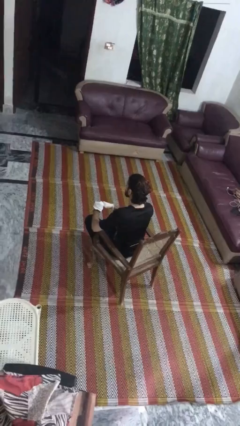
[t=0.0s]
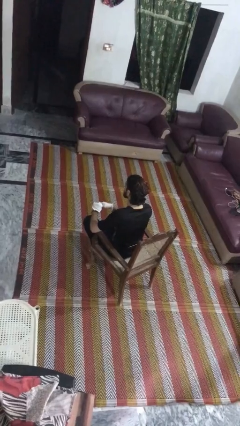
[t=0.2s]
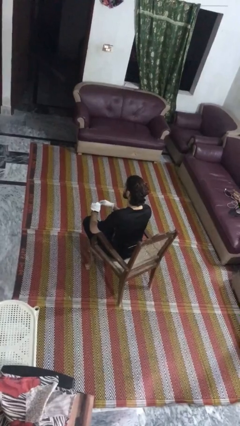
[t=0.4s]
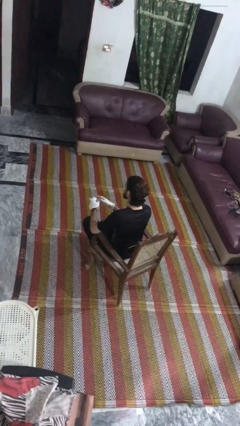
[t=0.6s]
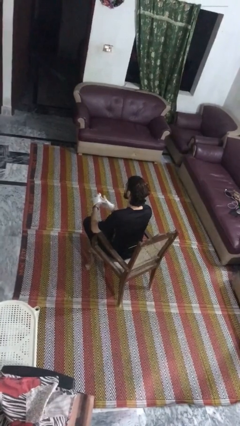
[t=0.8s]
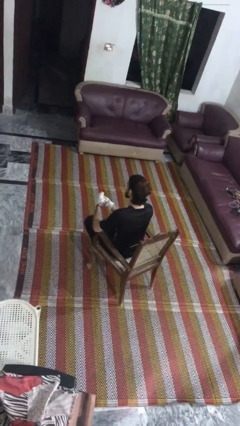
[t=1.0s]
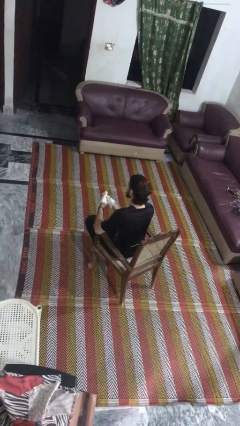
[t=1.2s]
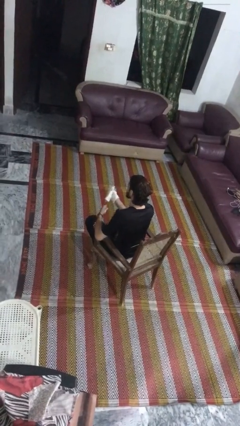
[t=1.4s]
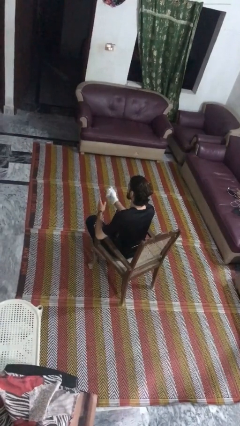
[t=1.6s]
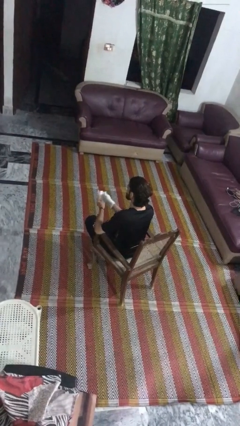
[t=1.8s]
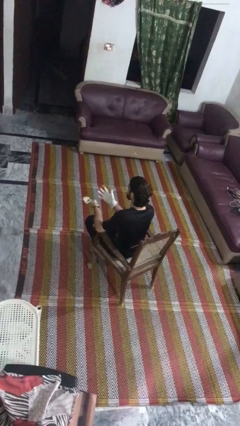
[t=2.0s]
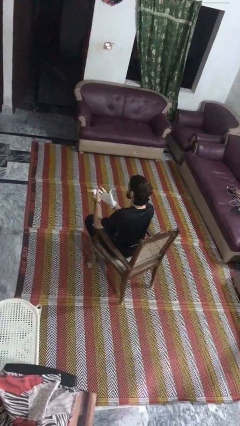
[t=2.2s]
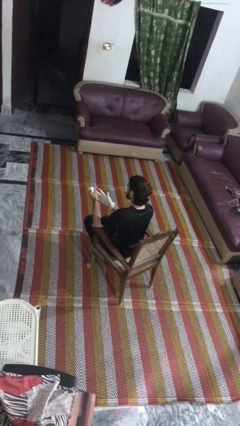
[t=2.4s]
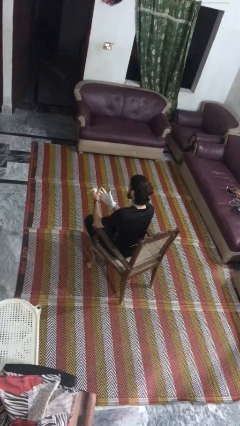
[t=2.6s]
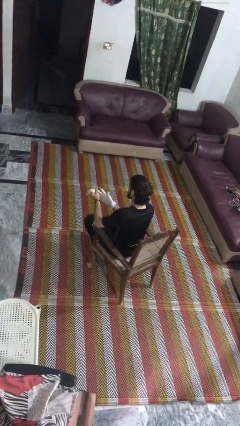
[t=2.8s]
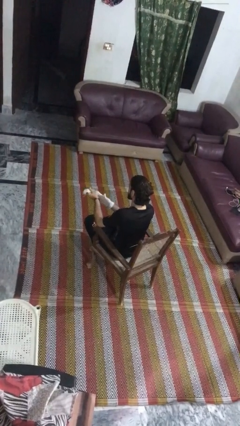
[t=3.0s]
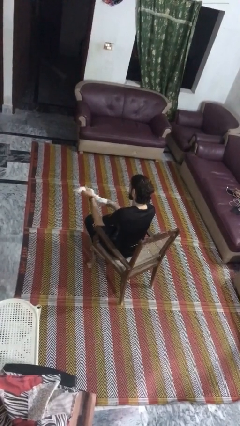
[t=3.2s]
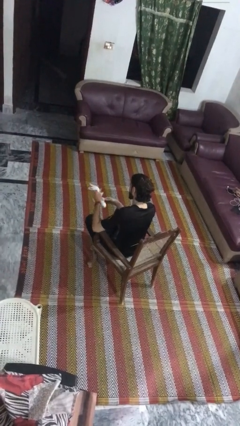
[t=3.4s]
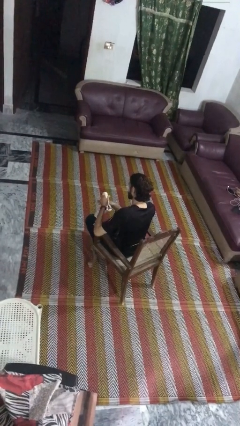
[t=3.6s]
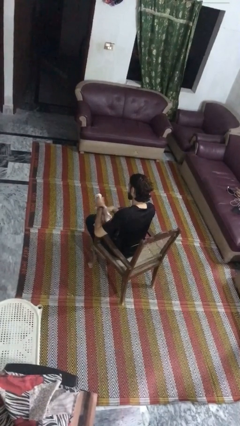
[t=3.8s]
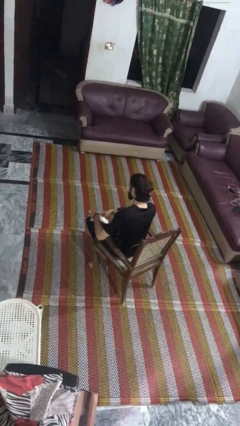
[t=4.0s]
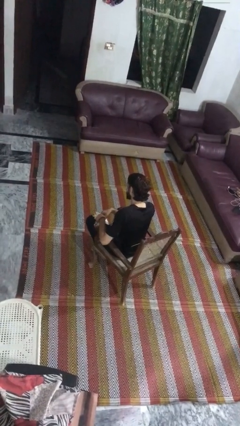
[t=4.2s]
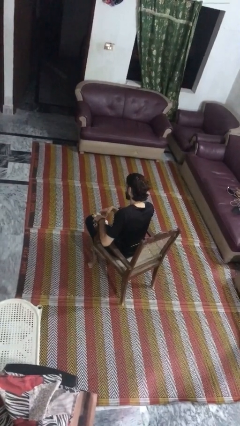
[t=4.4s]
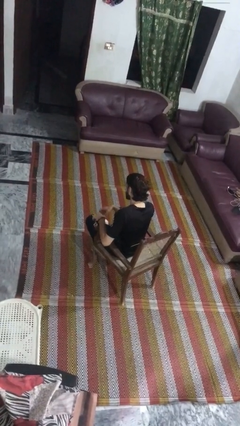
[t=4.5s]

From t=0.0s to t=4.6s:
person takes off gloves

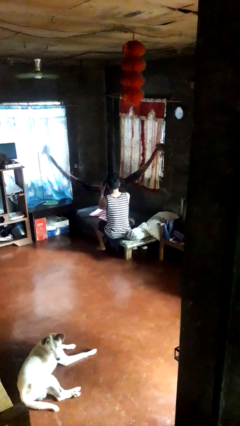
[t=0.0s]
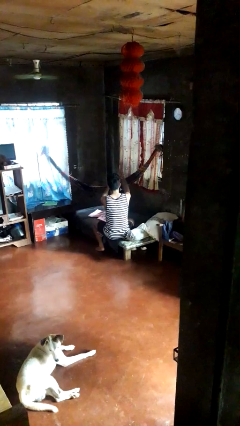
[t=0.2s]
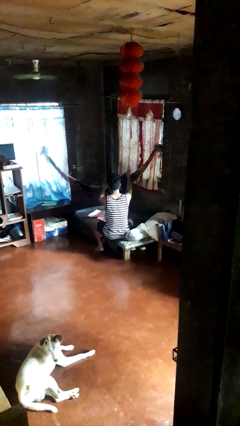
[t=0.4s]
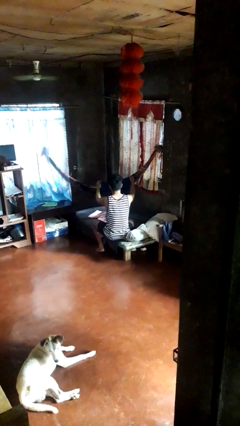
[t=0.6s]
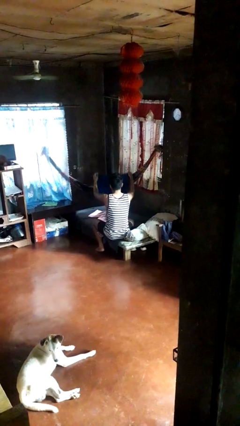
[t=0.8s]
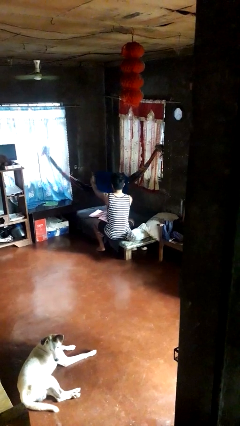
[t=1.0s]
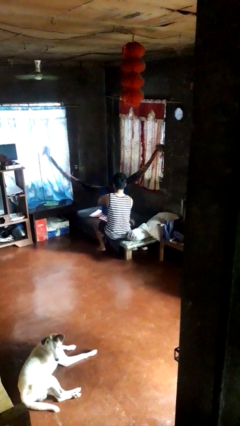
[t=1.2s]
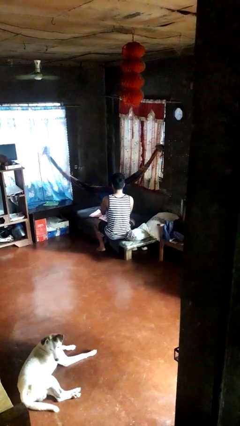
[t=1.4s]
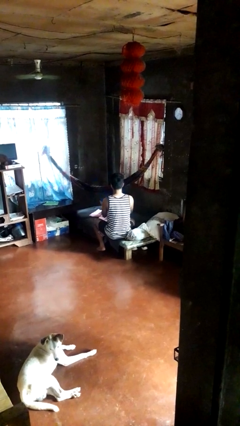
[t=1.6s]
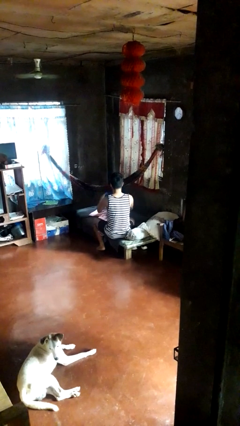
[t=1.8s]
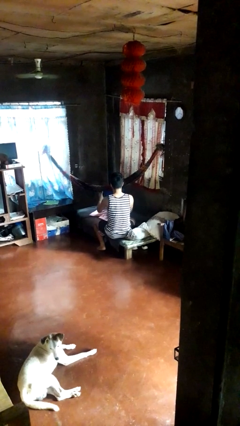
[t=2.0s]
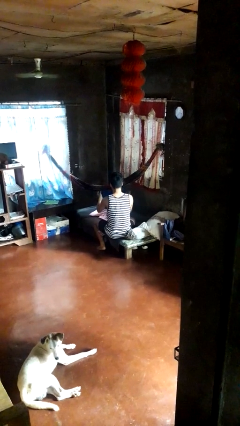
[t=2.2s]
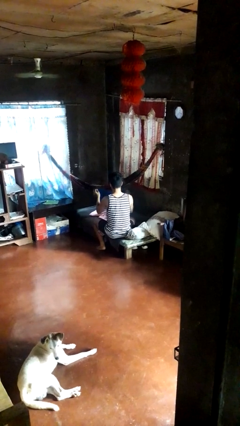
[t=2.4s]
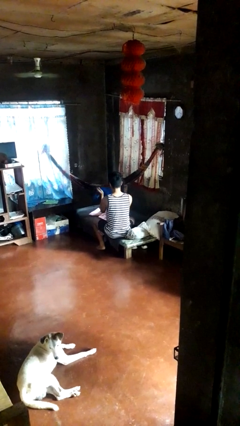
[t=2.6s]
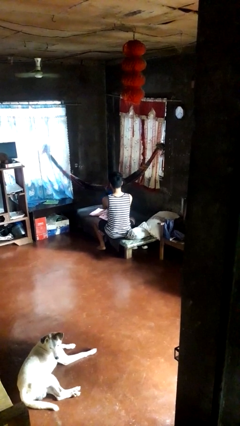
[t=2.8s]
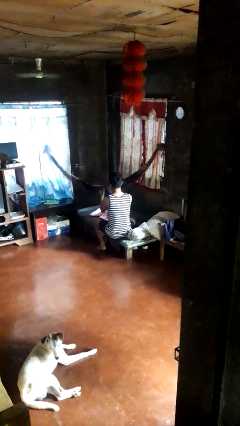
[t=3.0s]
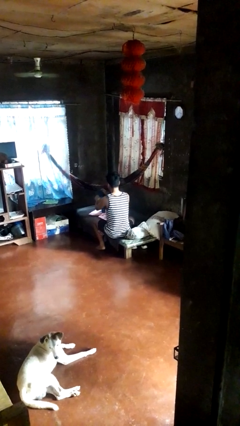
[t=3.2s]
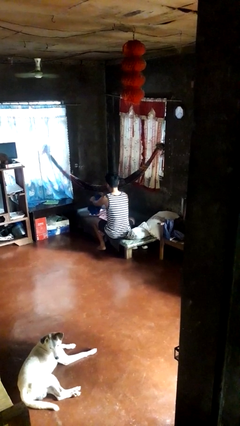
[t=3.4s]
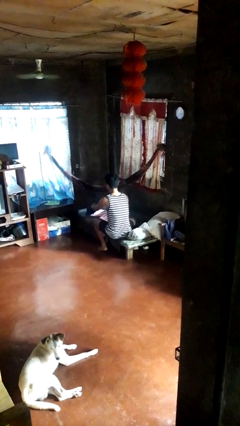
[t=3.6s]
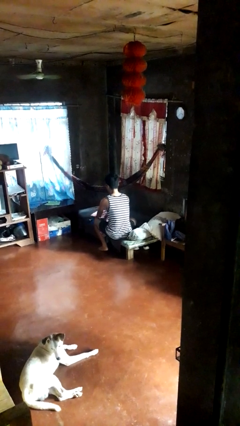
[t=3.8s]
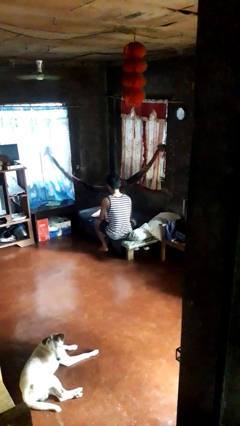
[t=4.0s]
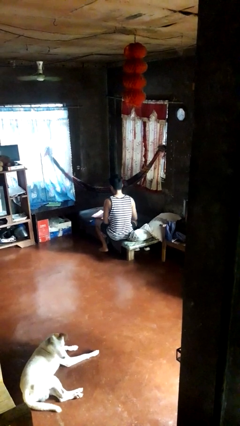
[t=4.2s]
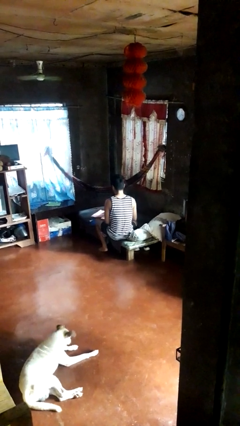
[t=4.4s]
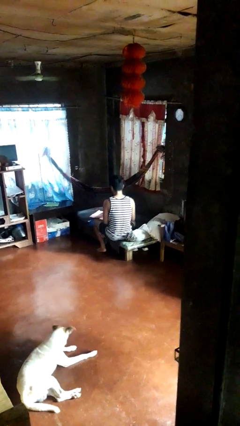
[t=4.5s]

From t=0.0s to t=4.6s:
person folds shirt

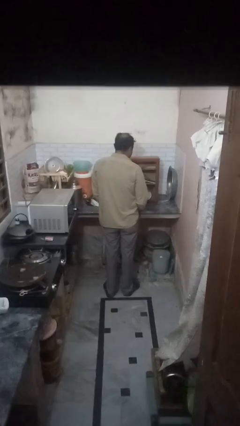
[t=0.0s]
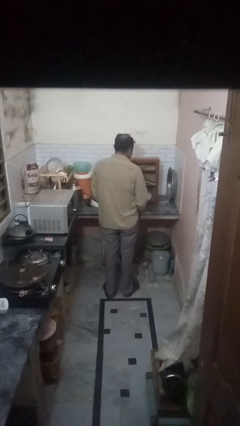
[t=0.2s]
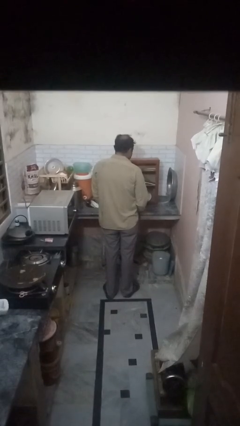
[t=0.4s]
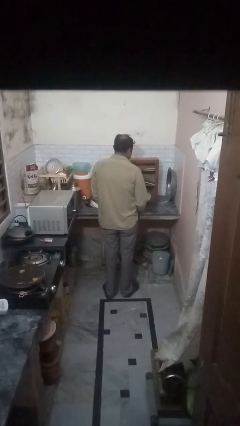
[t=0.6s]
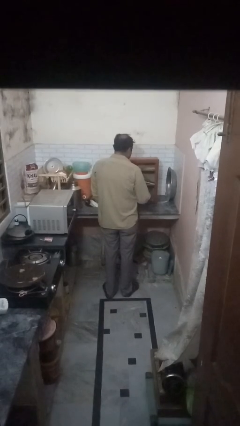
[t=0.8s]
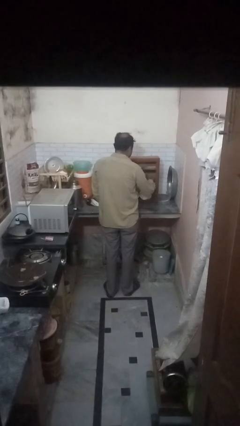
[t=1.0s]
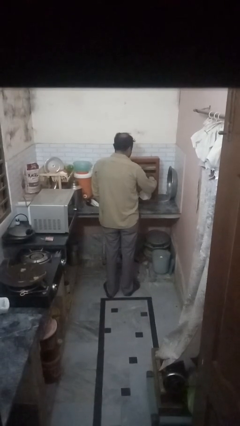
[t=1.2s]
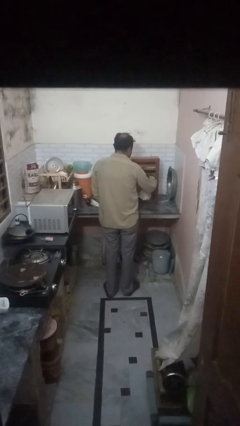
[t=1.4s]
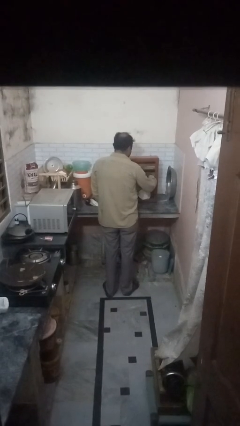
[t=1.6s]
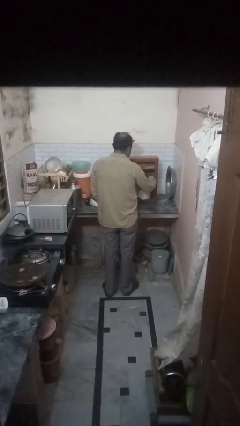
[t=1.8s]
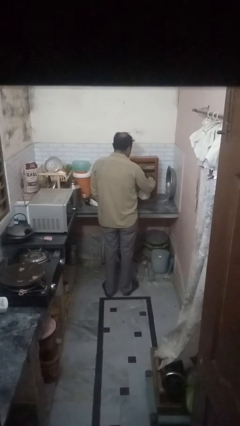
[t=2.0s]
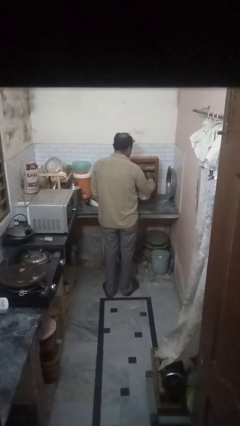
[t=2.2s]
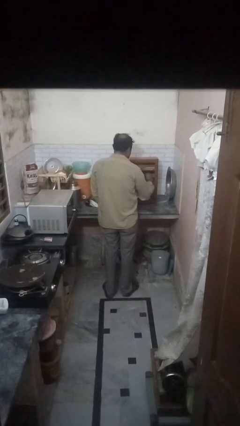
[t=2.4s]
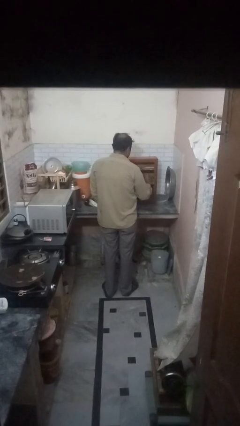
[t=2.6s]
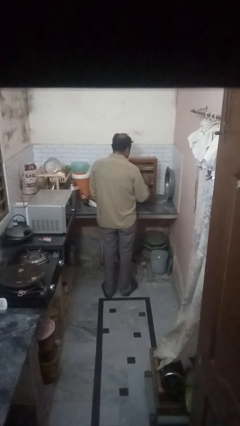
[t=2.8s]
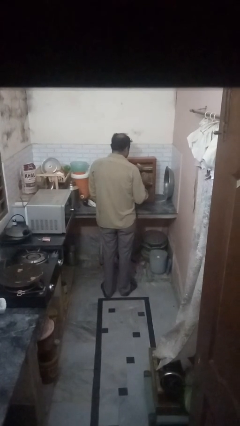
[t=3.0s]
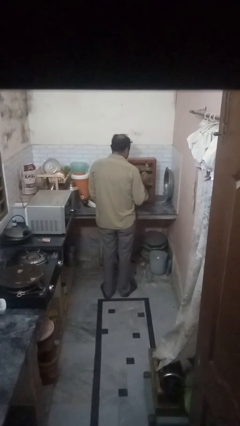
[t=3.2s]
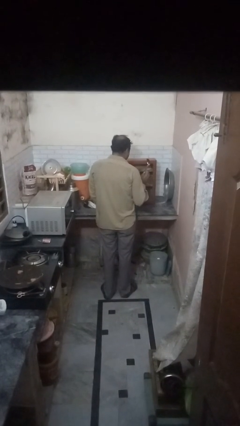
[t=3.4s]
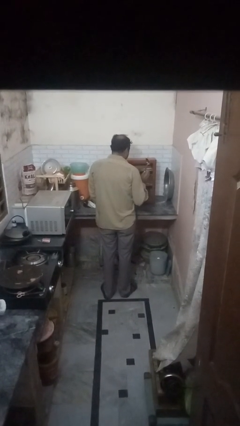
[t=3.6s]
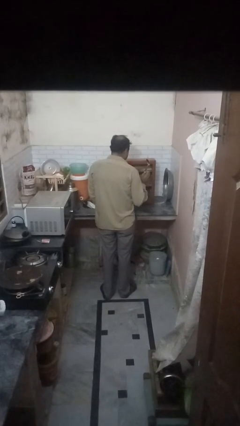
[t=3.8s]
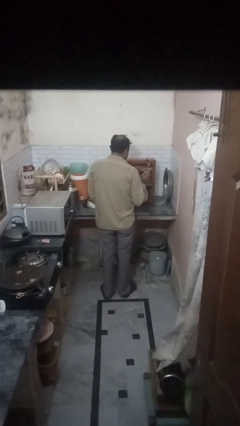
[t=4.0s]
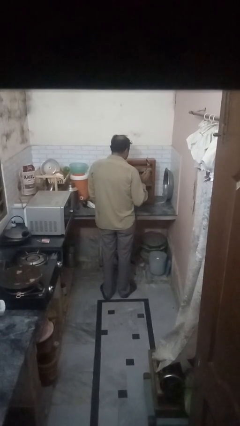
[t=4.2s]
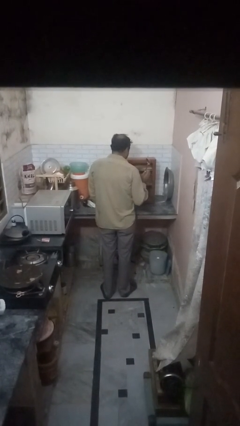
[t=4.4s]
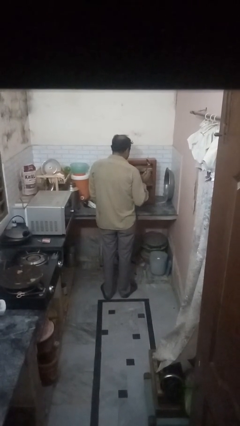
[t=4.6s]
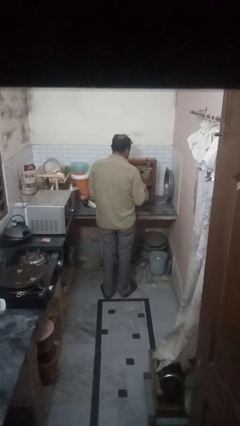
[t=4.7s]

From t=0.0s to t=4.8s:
person puts object in cabinet

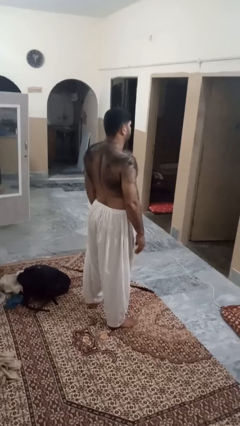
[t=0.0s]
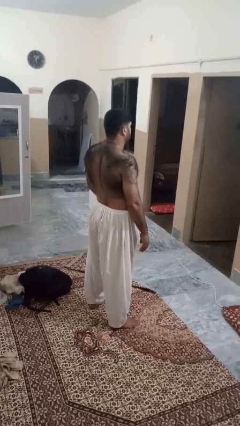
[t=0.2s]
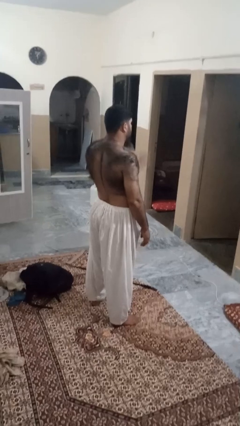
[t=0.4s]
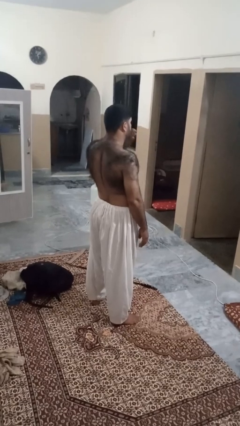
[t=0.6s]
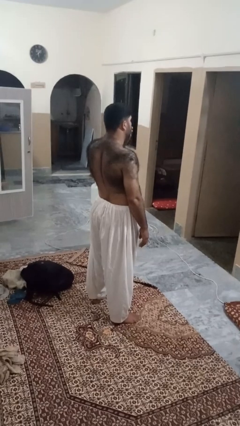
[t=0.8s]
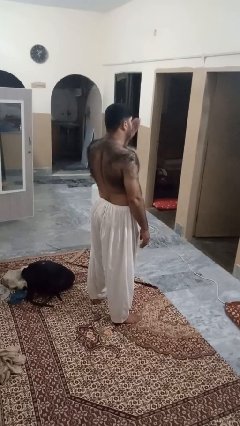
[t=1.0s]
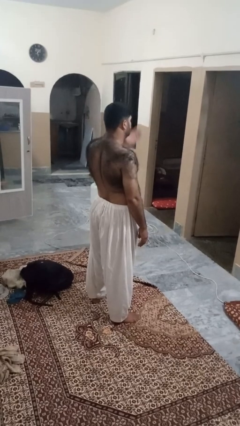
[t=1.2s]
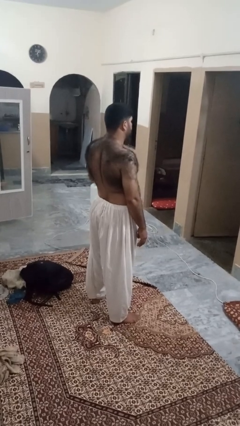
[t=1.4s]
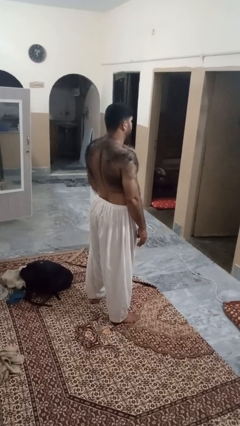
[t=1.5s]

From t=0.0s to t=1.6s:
person gestures blow kiss

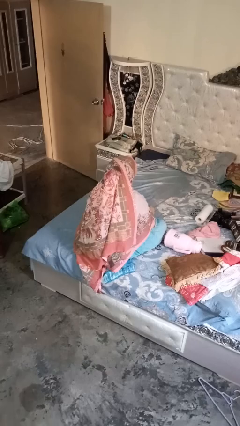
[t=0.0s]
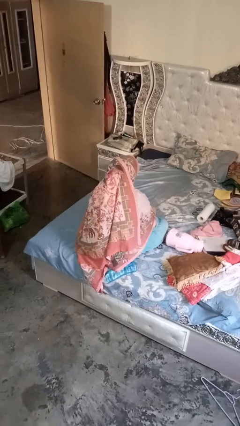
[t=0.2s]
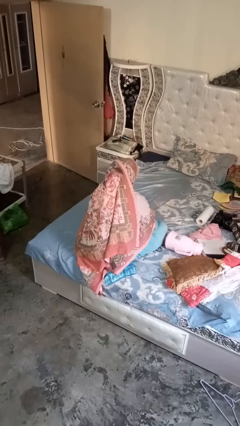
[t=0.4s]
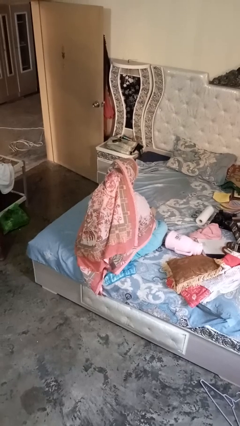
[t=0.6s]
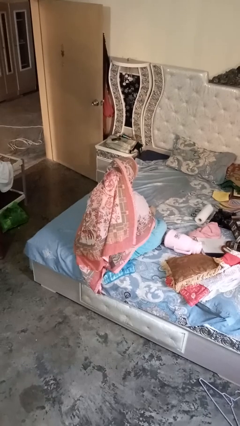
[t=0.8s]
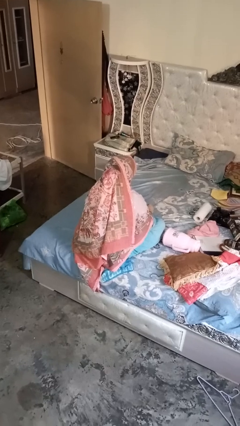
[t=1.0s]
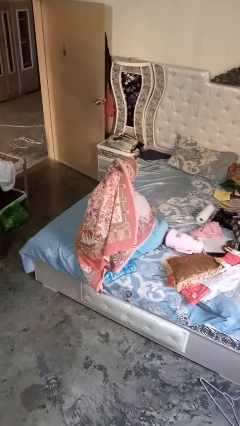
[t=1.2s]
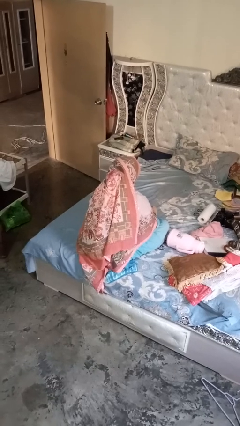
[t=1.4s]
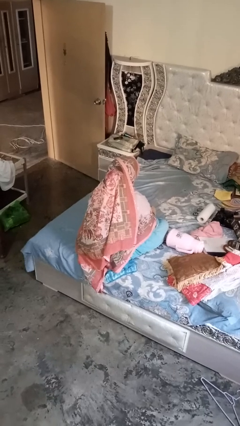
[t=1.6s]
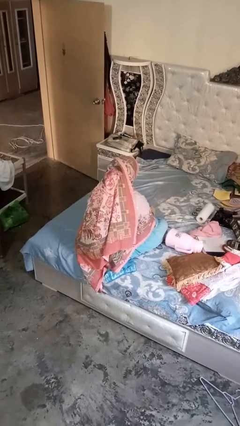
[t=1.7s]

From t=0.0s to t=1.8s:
person stirs mug

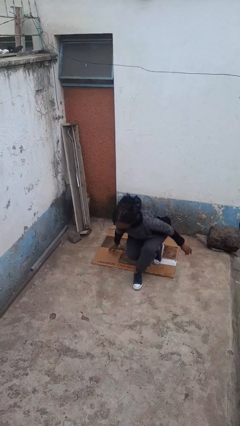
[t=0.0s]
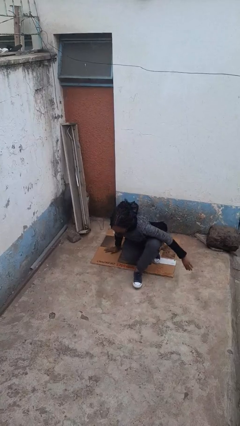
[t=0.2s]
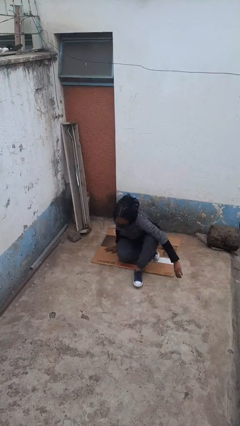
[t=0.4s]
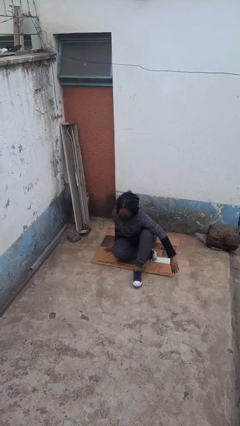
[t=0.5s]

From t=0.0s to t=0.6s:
person sits crisscross
